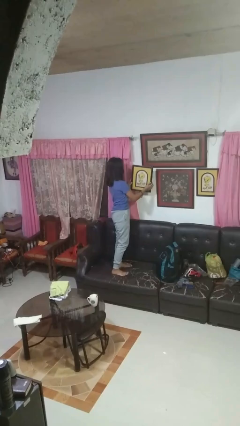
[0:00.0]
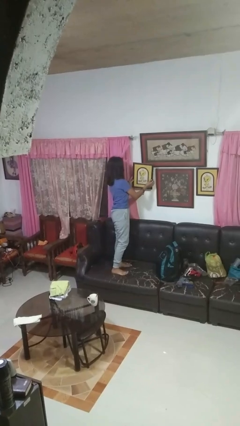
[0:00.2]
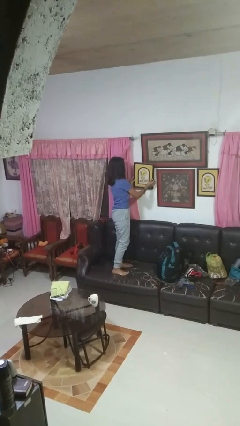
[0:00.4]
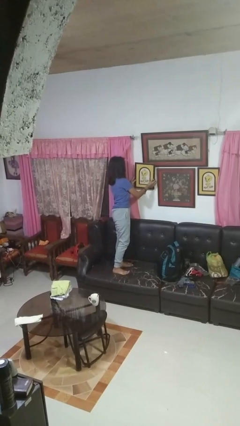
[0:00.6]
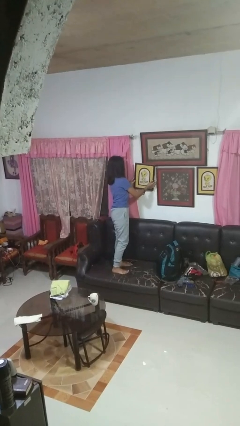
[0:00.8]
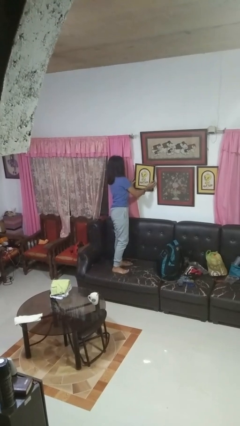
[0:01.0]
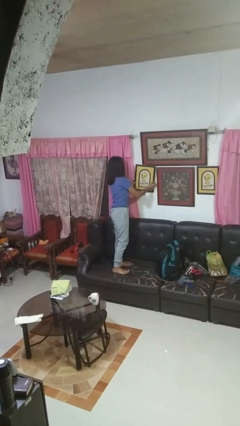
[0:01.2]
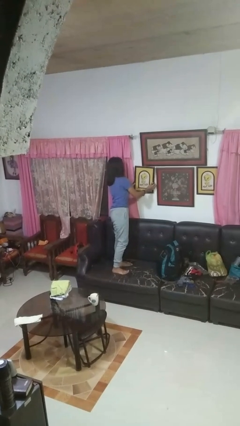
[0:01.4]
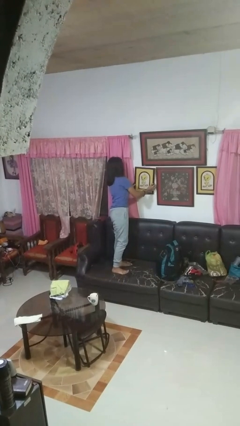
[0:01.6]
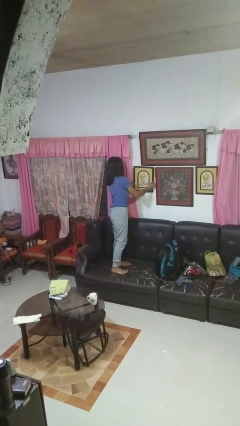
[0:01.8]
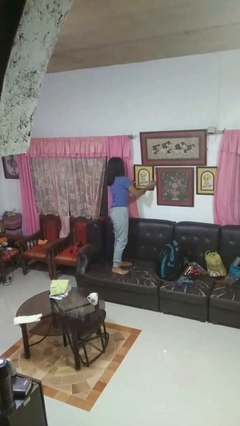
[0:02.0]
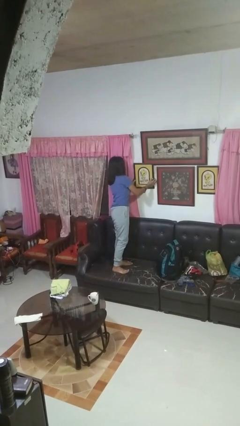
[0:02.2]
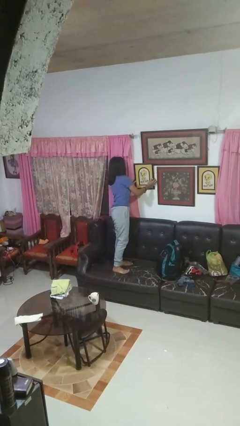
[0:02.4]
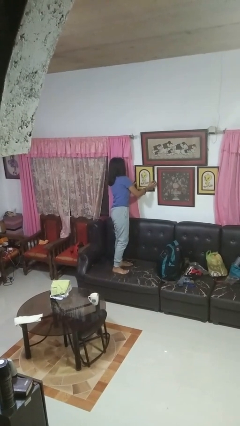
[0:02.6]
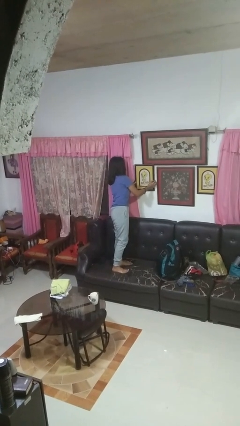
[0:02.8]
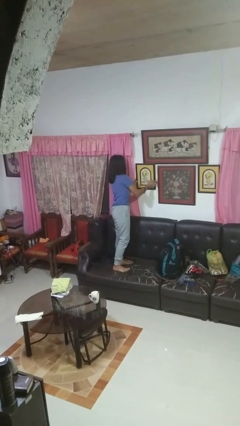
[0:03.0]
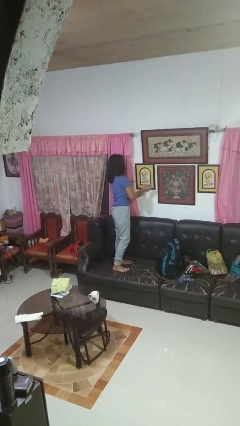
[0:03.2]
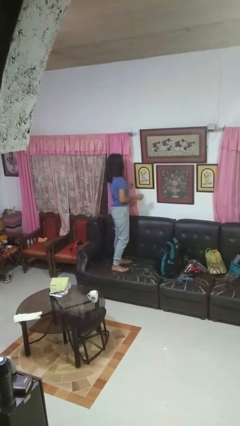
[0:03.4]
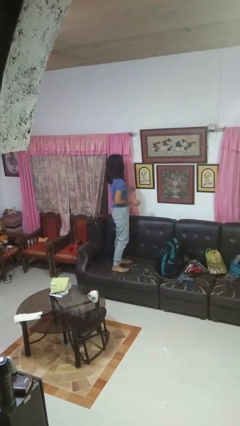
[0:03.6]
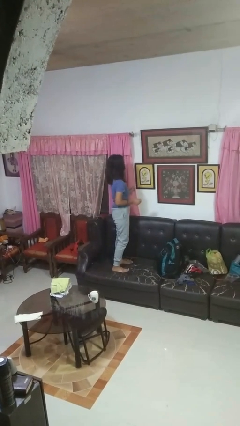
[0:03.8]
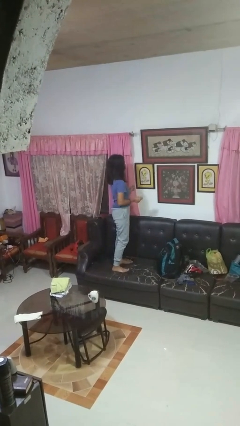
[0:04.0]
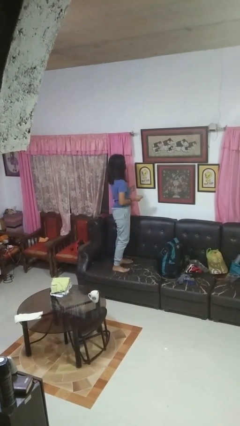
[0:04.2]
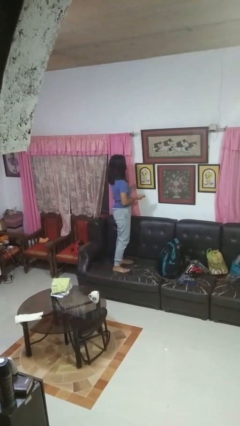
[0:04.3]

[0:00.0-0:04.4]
person puts up picture frame

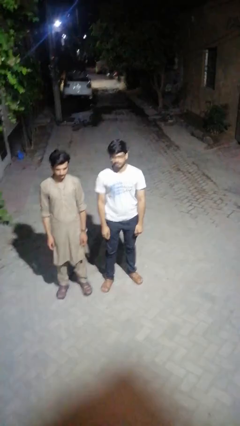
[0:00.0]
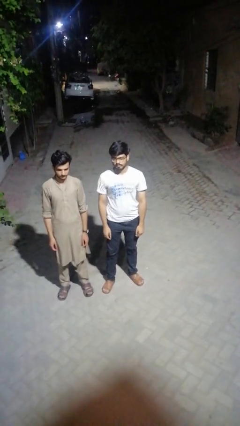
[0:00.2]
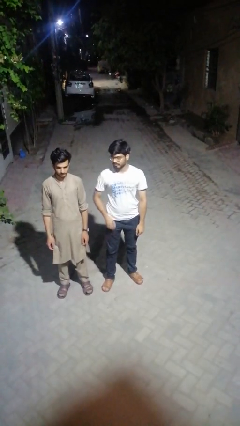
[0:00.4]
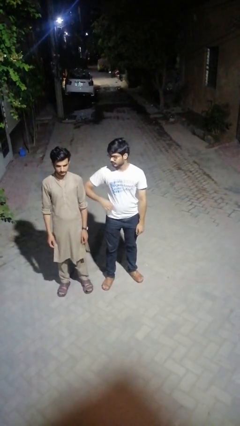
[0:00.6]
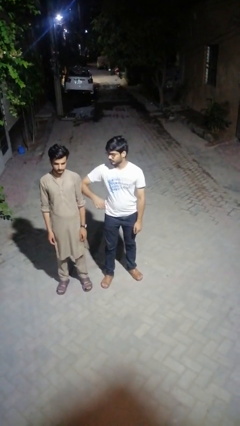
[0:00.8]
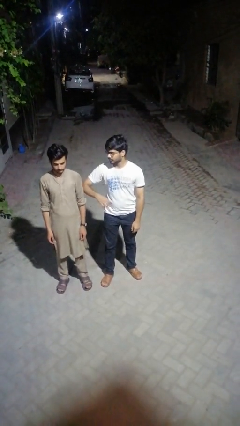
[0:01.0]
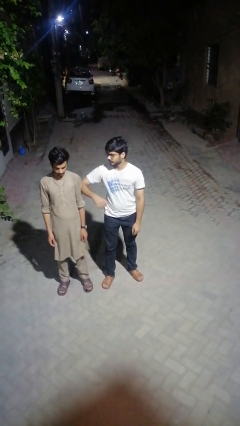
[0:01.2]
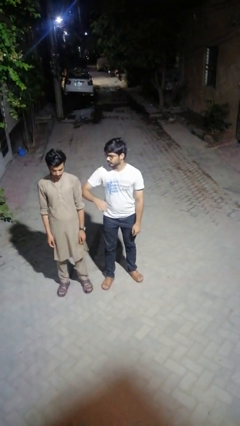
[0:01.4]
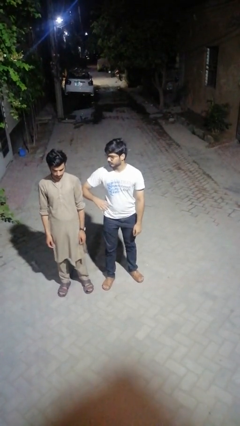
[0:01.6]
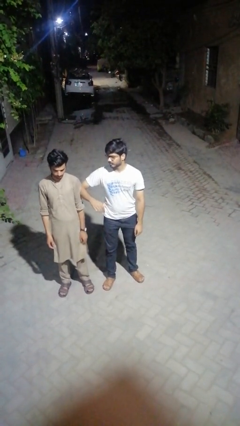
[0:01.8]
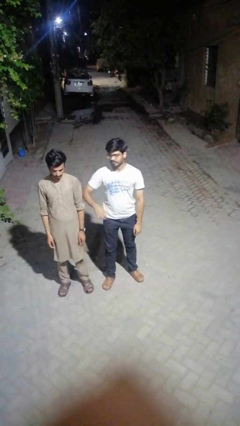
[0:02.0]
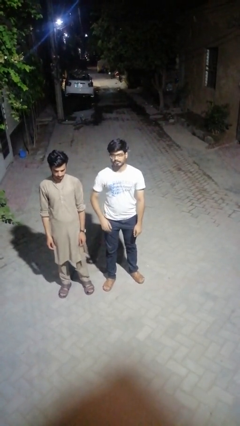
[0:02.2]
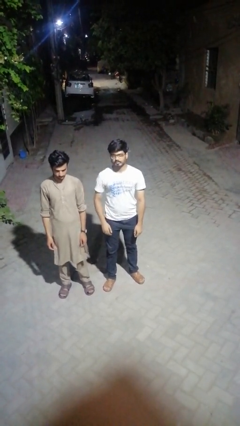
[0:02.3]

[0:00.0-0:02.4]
person nudges person with elbow

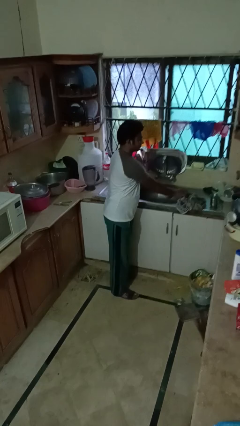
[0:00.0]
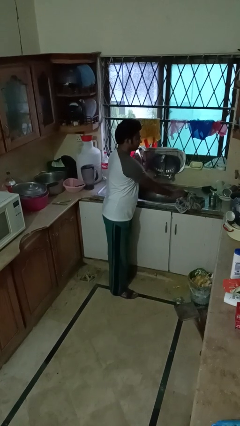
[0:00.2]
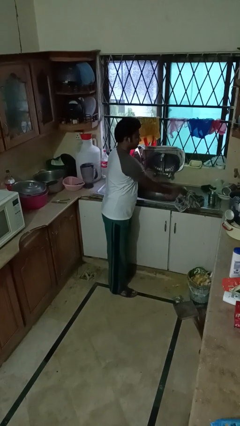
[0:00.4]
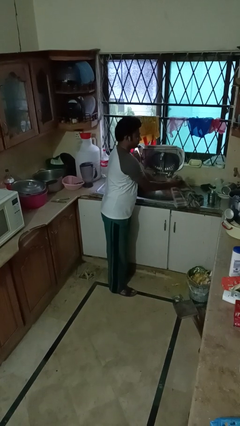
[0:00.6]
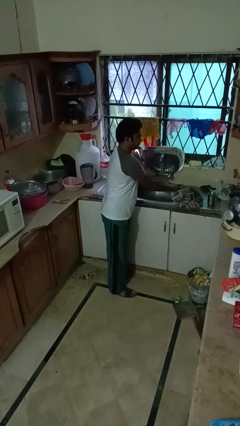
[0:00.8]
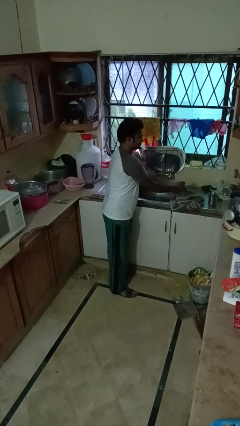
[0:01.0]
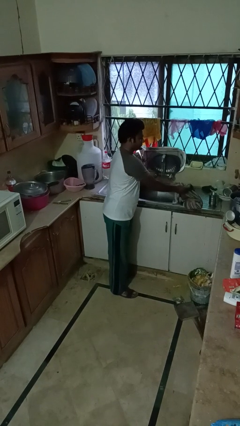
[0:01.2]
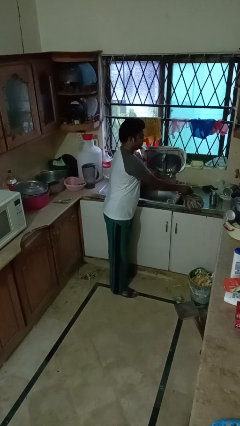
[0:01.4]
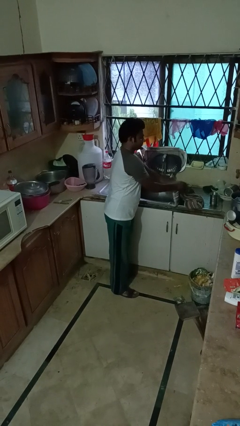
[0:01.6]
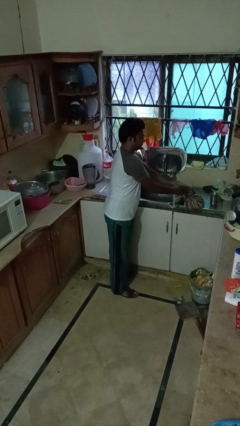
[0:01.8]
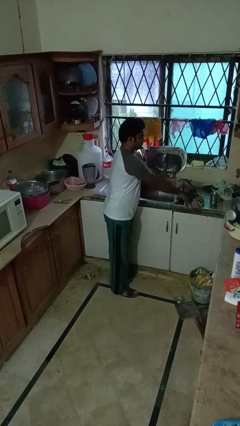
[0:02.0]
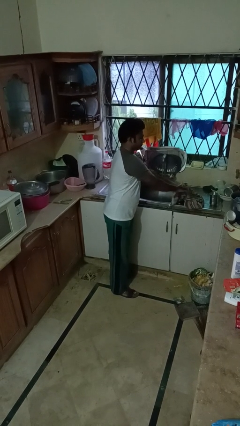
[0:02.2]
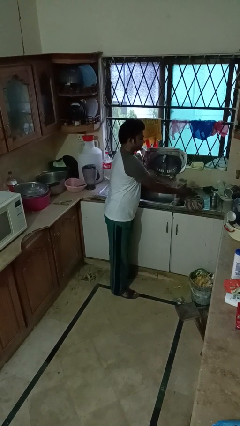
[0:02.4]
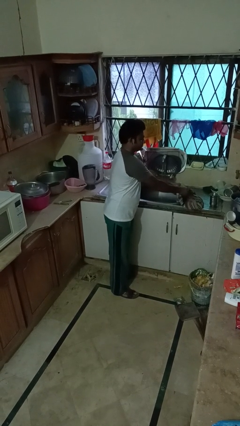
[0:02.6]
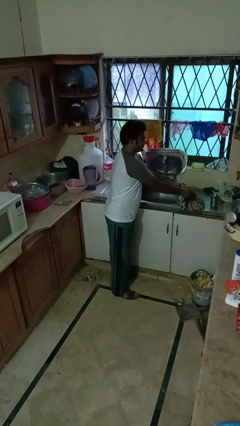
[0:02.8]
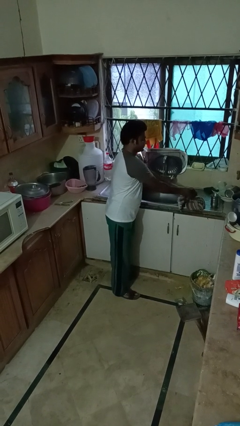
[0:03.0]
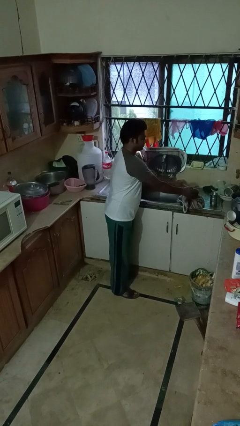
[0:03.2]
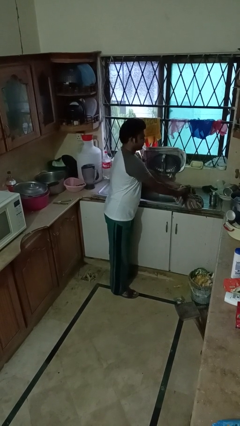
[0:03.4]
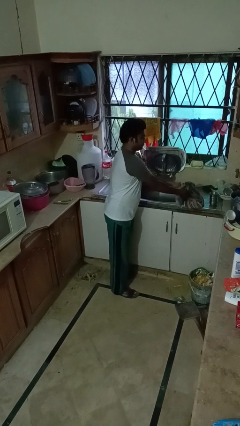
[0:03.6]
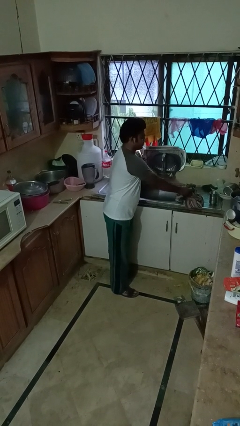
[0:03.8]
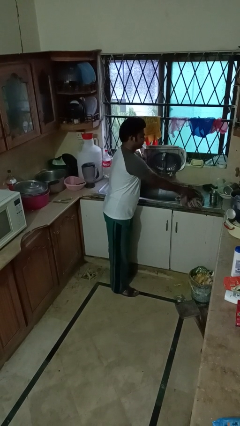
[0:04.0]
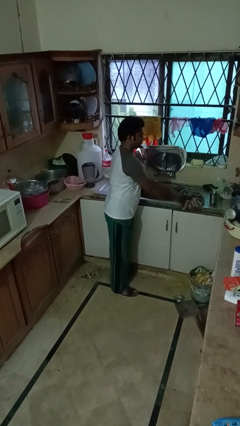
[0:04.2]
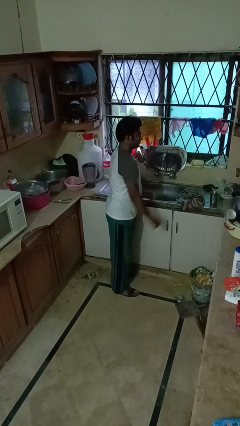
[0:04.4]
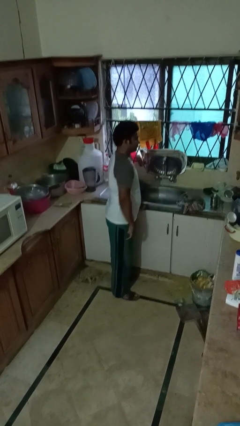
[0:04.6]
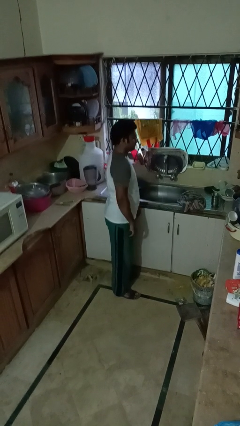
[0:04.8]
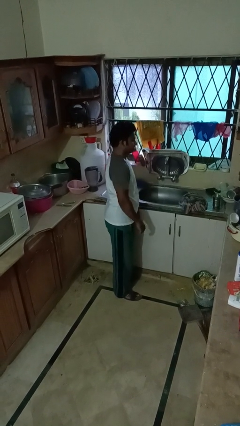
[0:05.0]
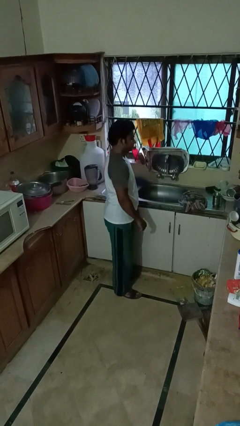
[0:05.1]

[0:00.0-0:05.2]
person dries hands with towel

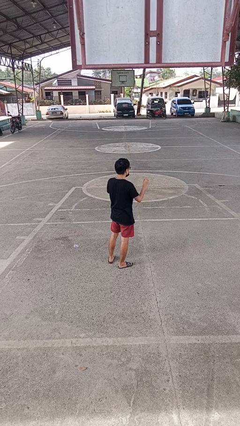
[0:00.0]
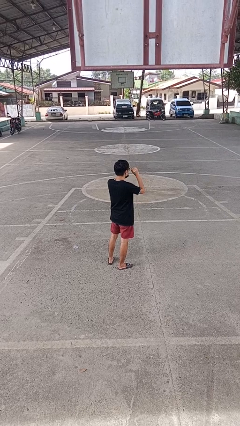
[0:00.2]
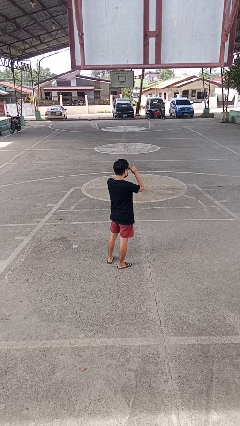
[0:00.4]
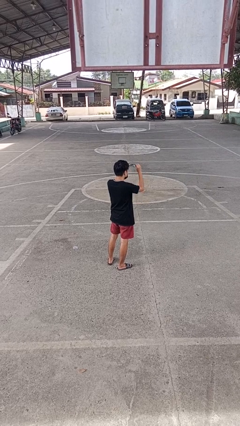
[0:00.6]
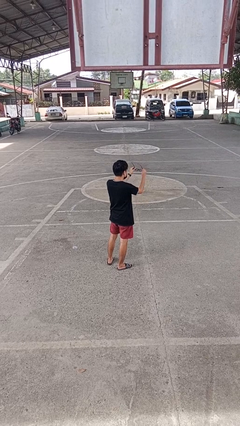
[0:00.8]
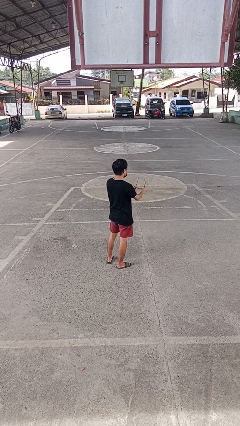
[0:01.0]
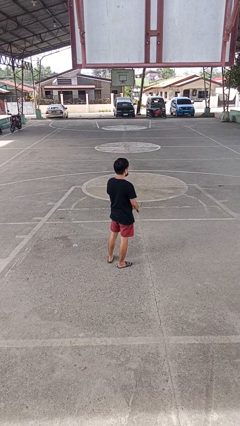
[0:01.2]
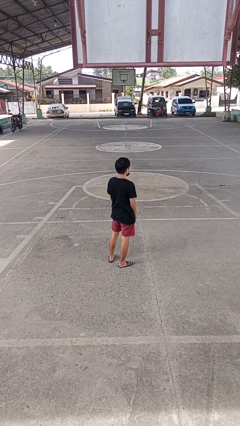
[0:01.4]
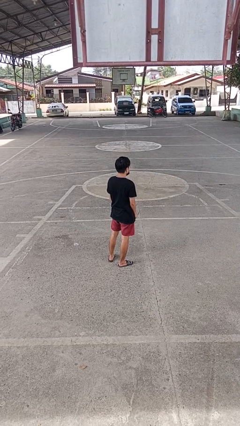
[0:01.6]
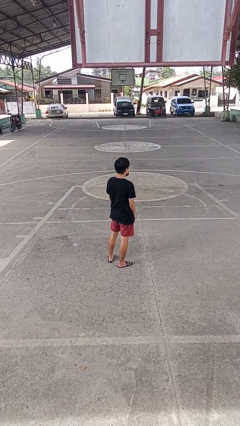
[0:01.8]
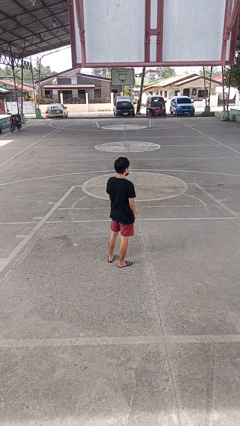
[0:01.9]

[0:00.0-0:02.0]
person takes off glasses

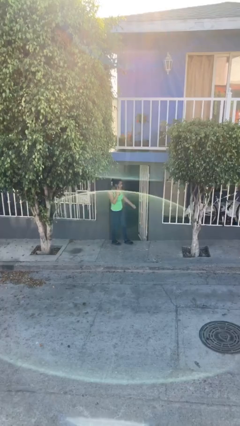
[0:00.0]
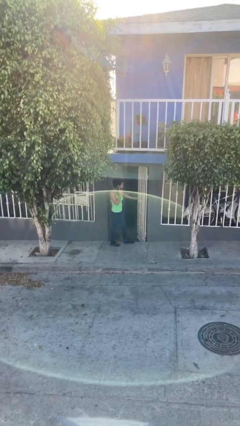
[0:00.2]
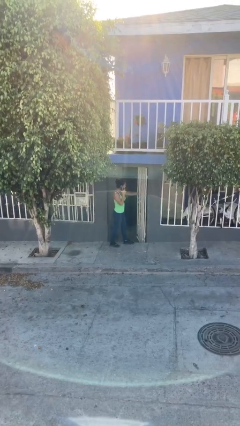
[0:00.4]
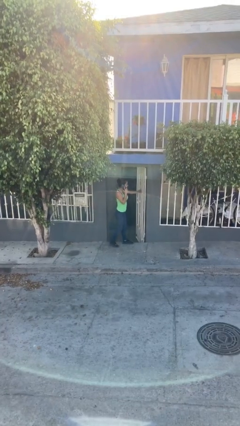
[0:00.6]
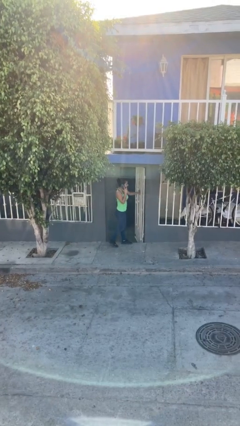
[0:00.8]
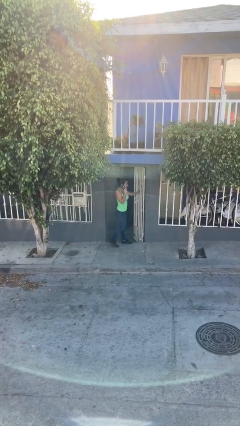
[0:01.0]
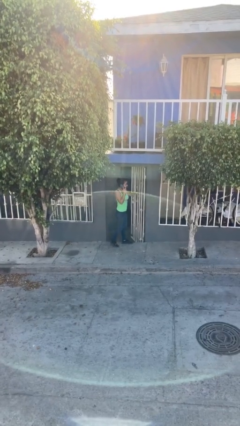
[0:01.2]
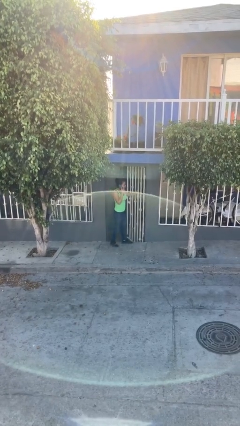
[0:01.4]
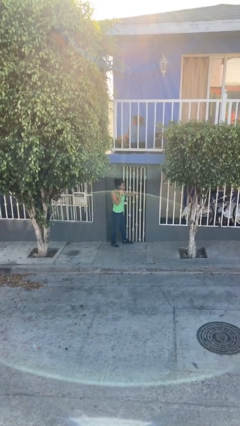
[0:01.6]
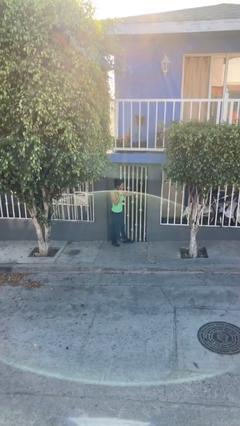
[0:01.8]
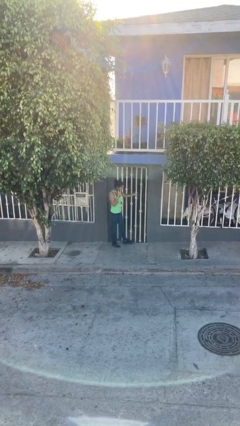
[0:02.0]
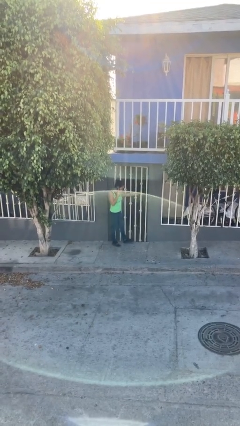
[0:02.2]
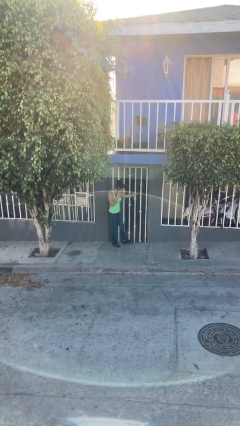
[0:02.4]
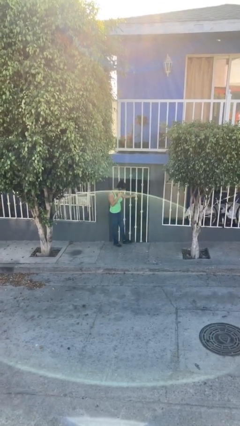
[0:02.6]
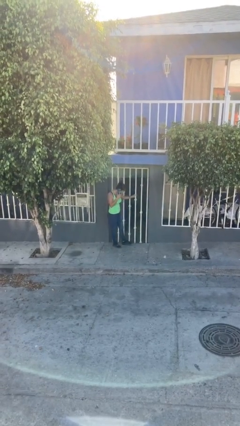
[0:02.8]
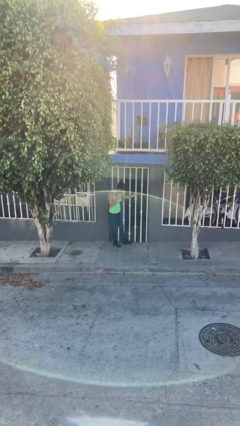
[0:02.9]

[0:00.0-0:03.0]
person closes facility door

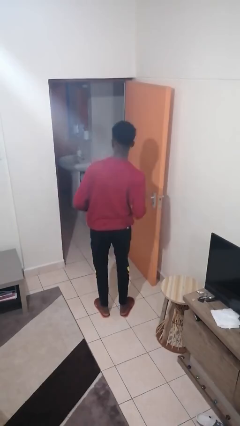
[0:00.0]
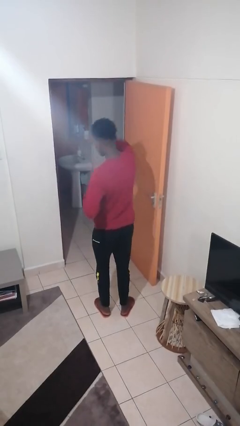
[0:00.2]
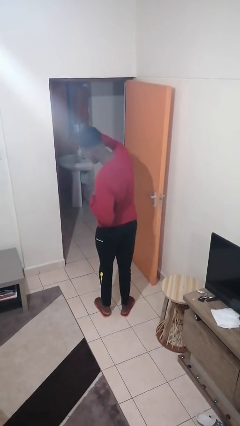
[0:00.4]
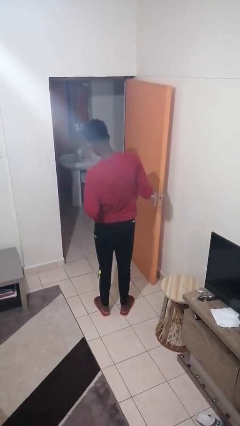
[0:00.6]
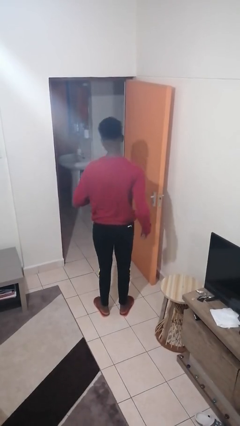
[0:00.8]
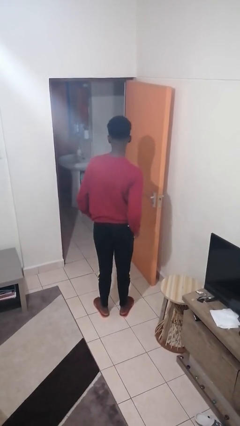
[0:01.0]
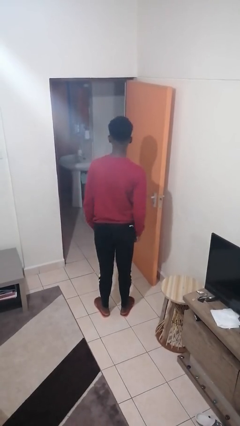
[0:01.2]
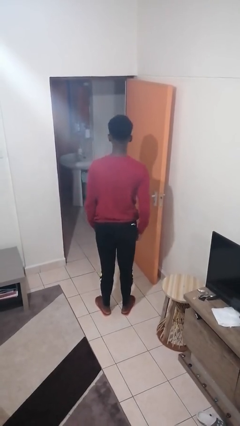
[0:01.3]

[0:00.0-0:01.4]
person punches
